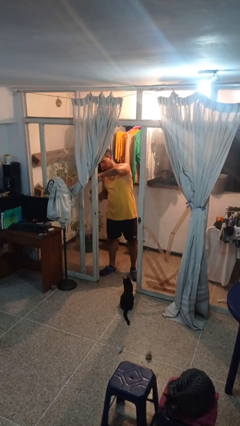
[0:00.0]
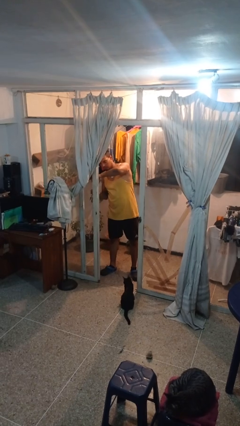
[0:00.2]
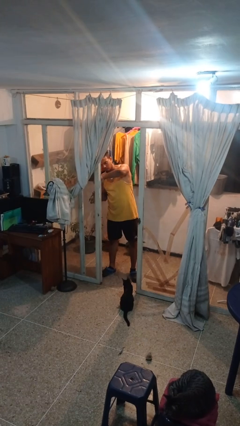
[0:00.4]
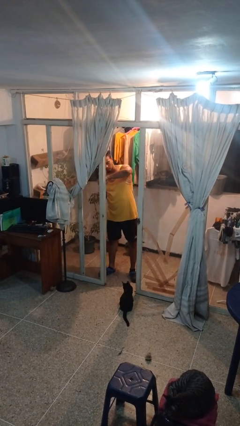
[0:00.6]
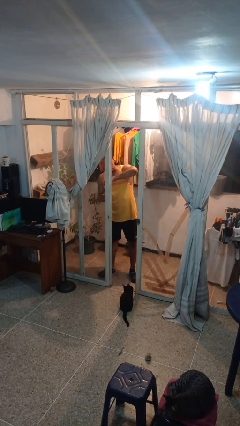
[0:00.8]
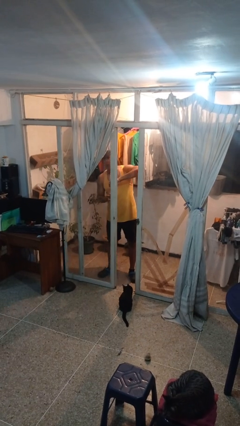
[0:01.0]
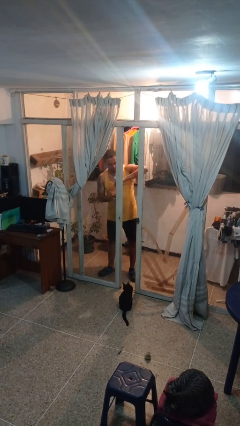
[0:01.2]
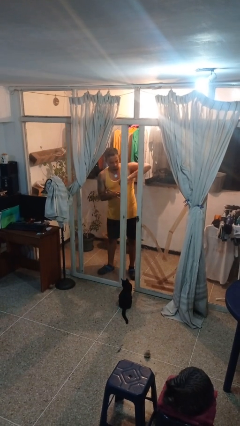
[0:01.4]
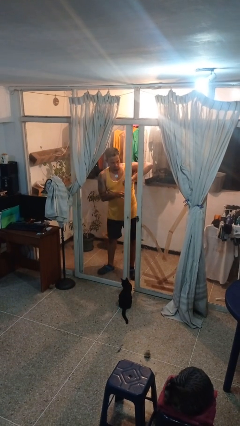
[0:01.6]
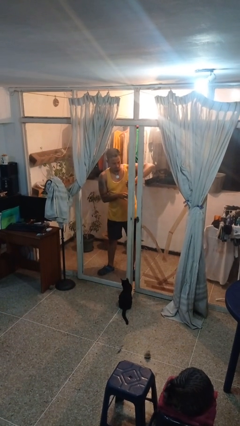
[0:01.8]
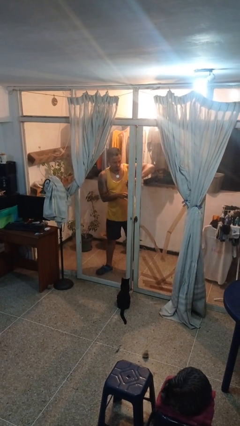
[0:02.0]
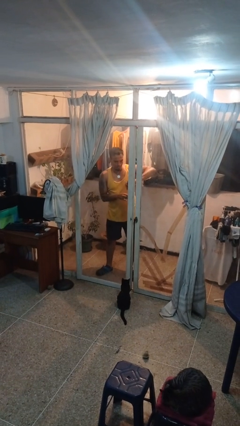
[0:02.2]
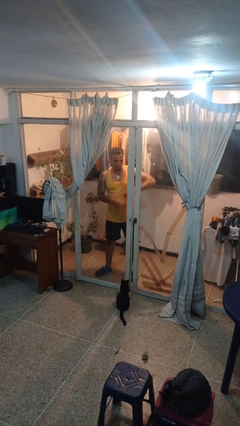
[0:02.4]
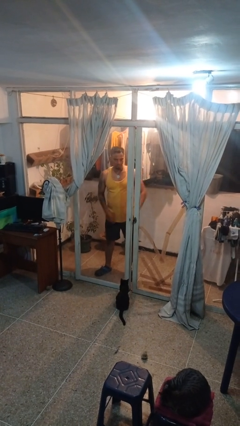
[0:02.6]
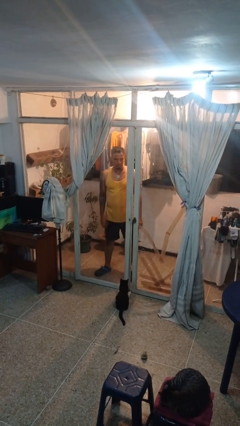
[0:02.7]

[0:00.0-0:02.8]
person closes sliding door

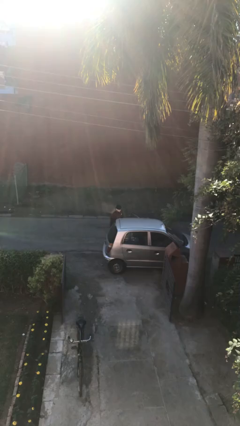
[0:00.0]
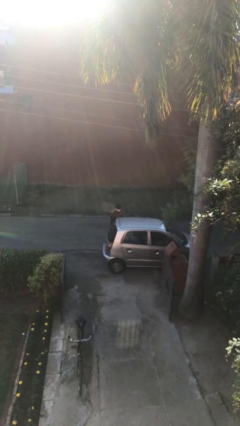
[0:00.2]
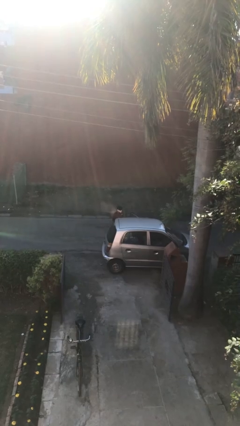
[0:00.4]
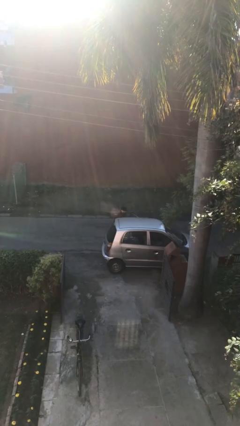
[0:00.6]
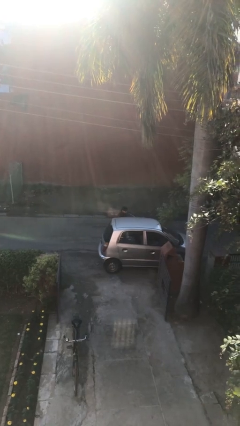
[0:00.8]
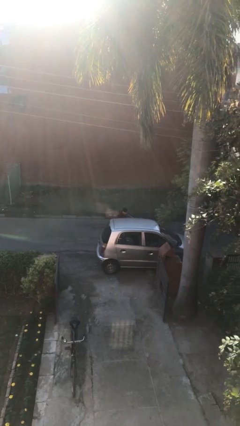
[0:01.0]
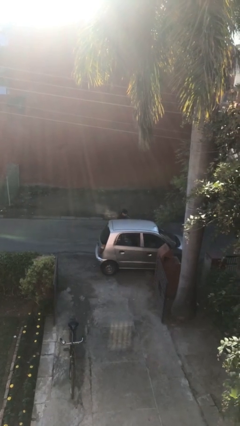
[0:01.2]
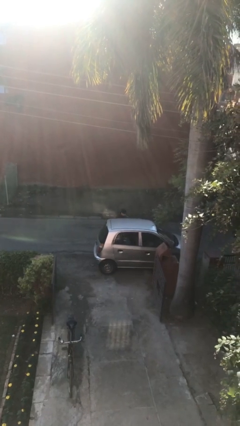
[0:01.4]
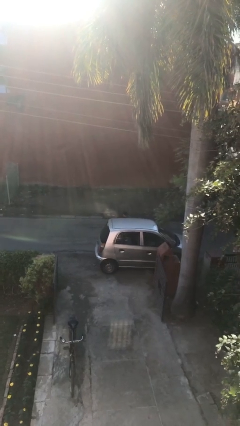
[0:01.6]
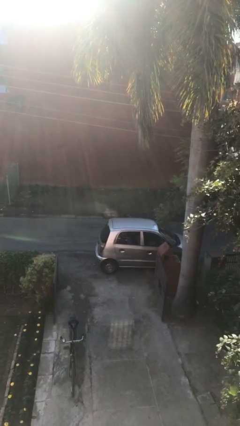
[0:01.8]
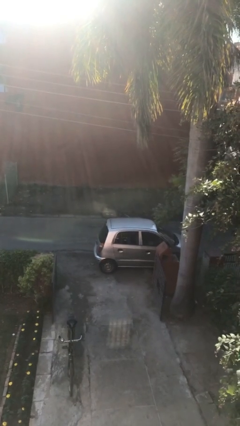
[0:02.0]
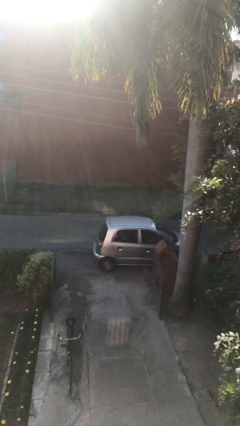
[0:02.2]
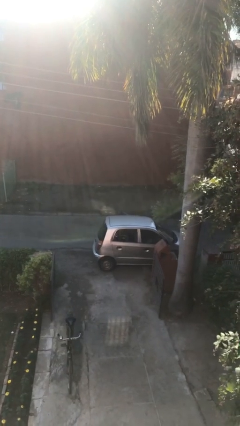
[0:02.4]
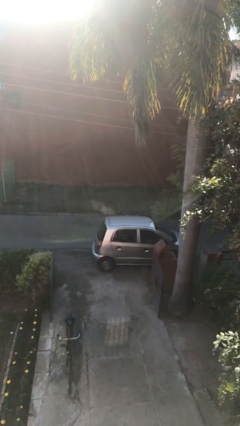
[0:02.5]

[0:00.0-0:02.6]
person enters car

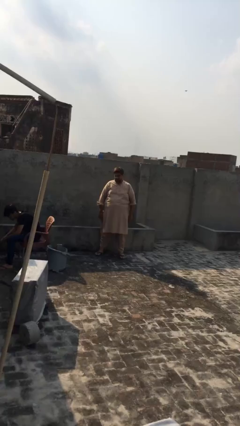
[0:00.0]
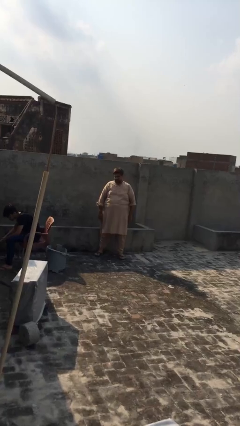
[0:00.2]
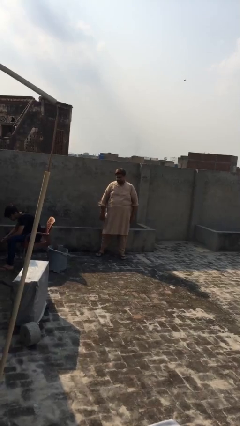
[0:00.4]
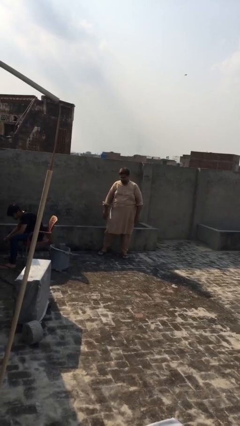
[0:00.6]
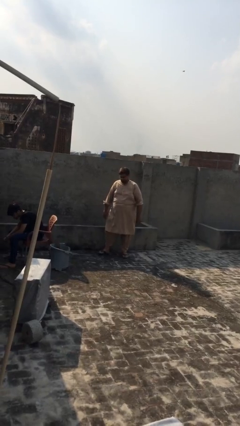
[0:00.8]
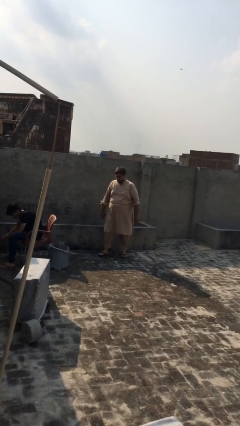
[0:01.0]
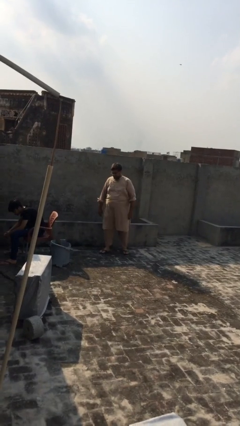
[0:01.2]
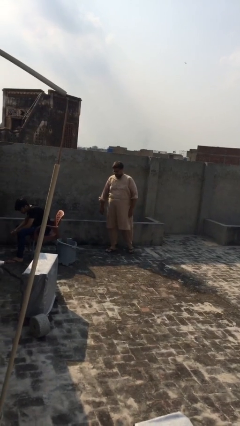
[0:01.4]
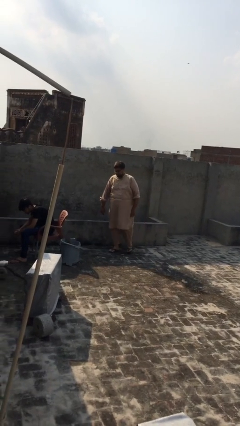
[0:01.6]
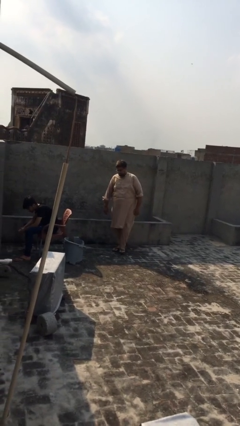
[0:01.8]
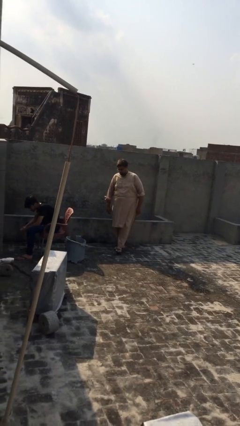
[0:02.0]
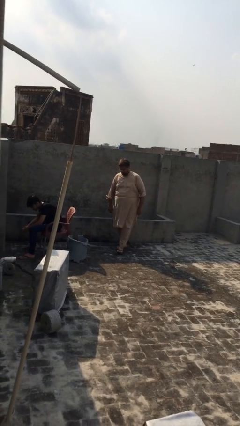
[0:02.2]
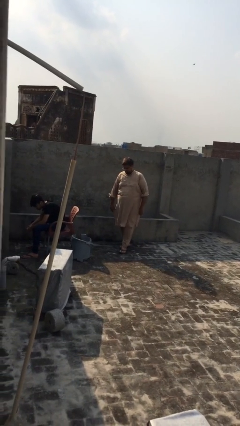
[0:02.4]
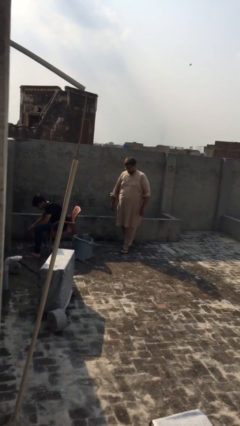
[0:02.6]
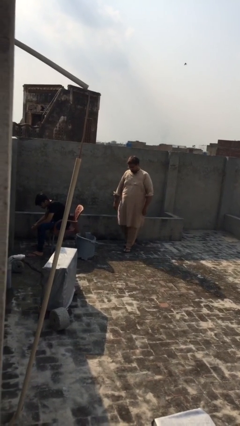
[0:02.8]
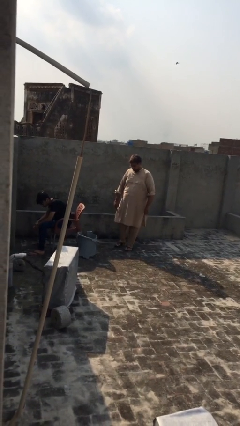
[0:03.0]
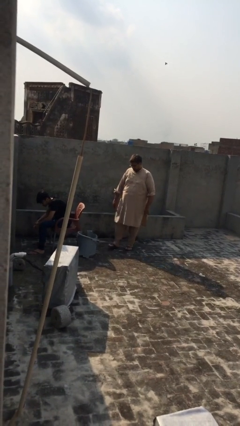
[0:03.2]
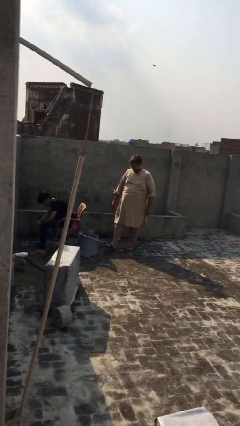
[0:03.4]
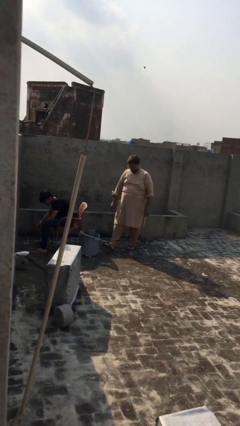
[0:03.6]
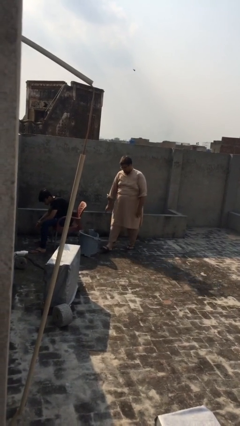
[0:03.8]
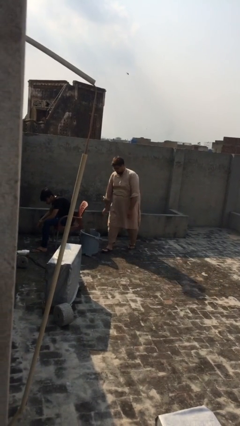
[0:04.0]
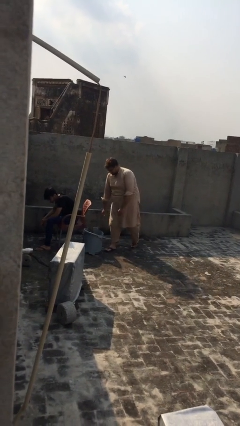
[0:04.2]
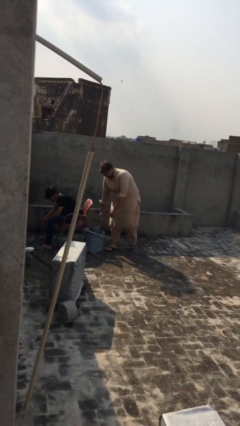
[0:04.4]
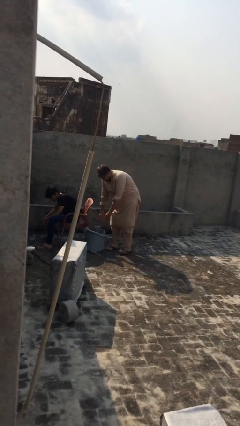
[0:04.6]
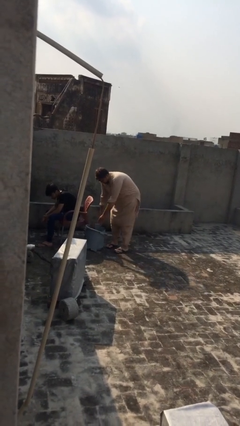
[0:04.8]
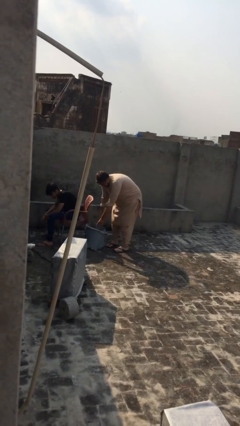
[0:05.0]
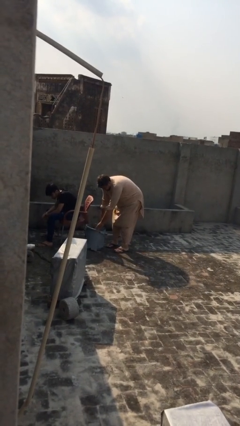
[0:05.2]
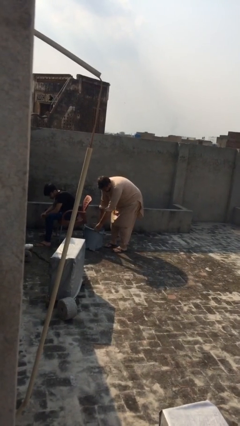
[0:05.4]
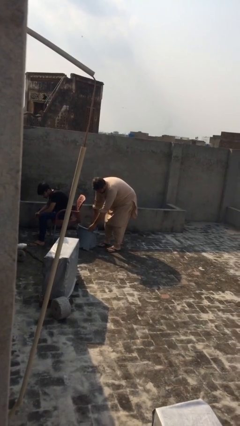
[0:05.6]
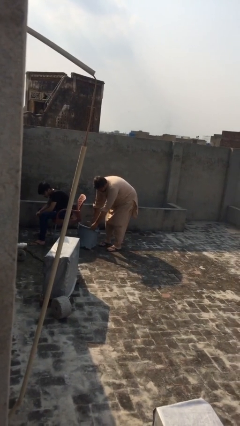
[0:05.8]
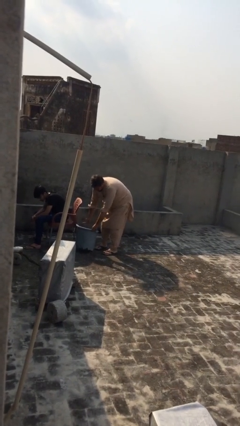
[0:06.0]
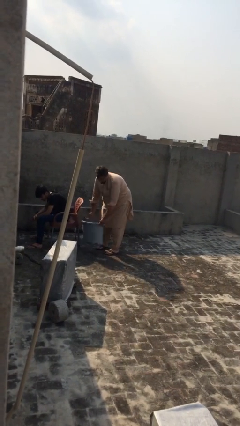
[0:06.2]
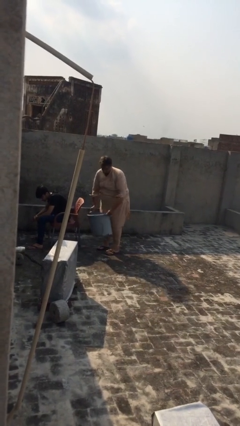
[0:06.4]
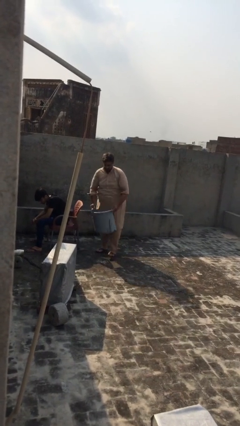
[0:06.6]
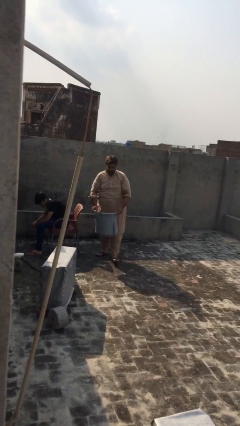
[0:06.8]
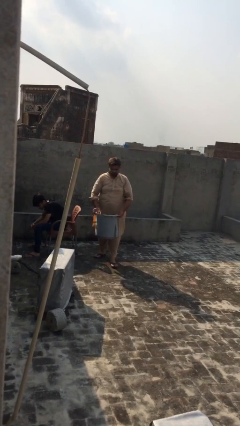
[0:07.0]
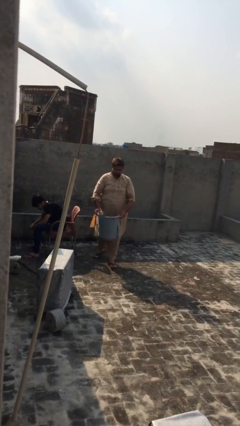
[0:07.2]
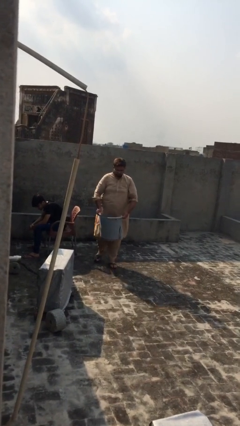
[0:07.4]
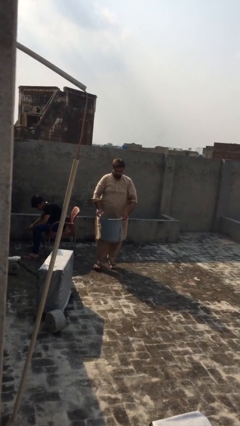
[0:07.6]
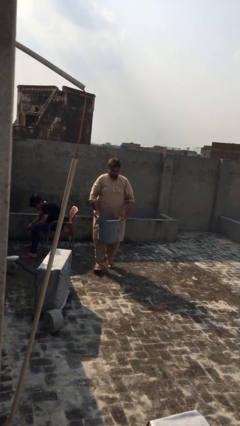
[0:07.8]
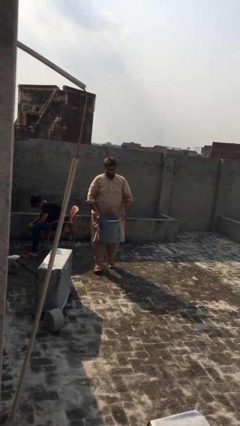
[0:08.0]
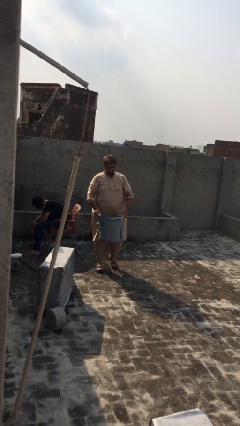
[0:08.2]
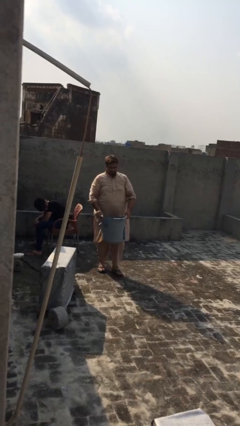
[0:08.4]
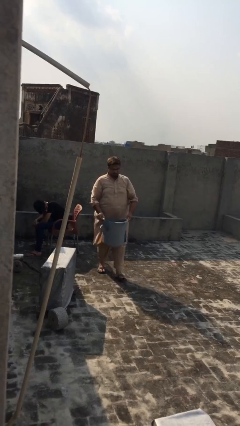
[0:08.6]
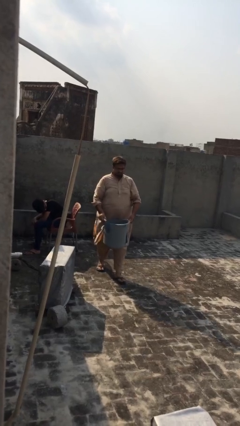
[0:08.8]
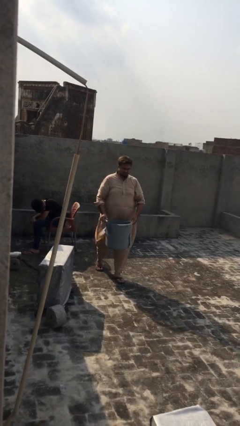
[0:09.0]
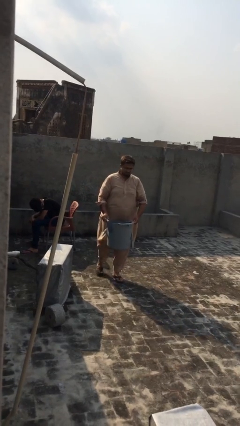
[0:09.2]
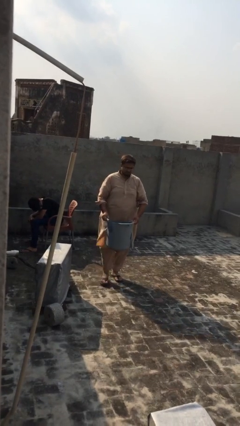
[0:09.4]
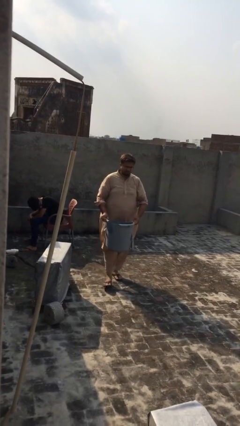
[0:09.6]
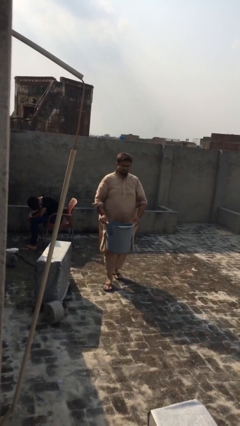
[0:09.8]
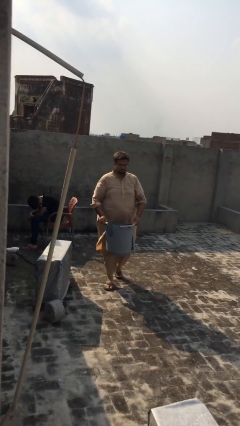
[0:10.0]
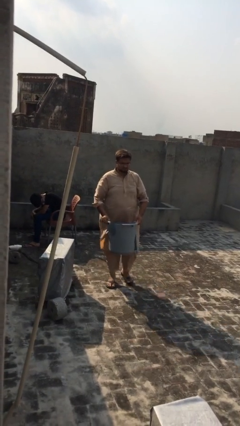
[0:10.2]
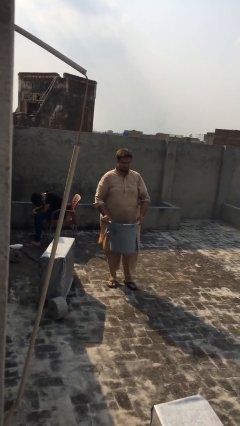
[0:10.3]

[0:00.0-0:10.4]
person steals object from person

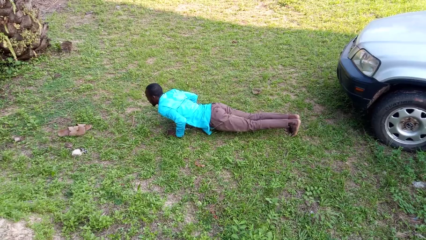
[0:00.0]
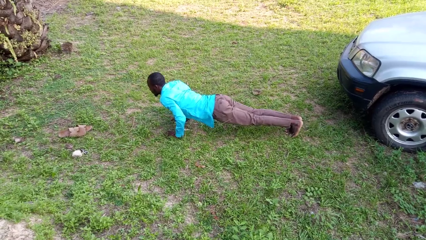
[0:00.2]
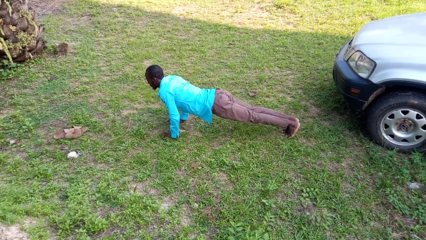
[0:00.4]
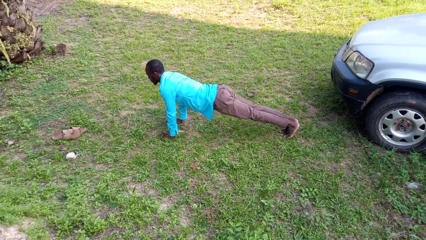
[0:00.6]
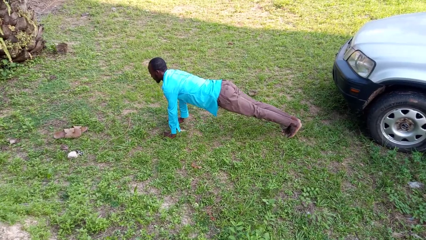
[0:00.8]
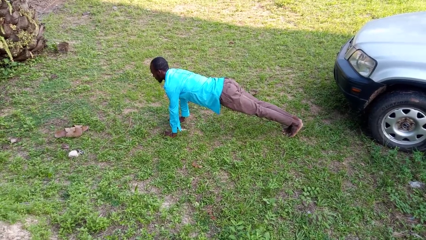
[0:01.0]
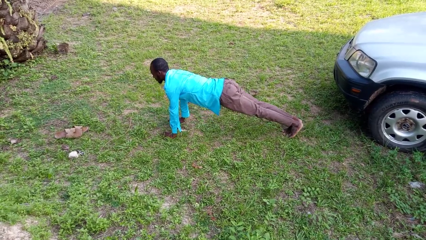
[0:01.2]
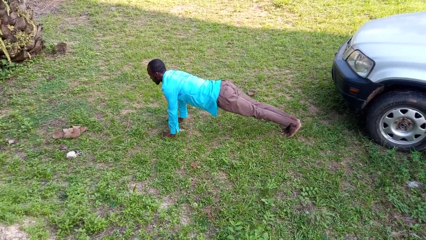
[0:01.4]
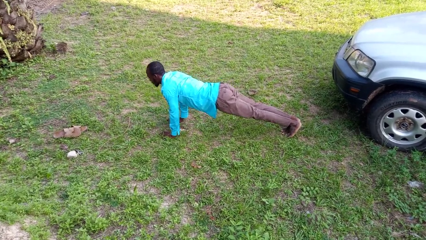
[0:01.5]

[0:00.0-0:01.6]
person exercises with pushup

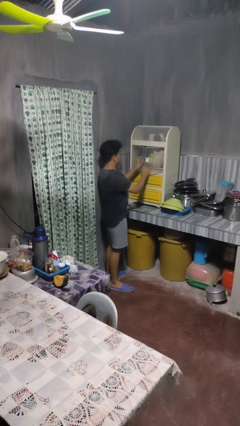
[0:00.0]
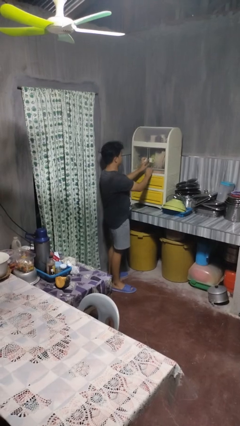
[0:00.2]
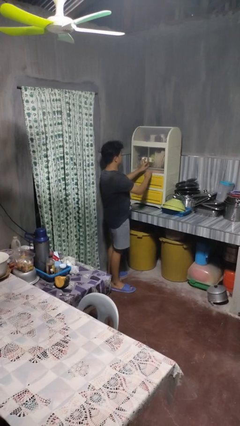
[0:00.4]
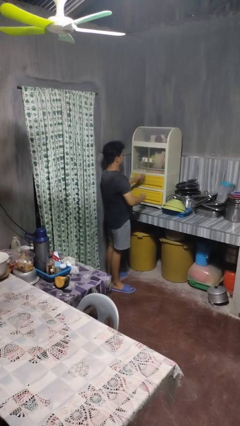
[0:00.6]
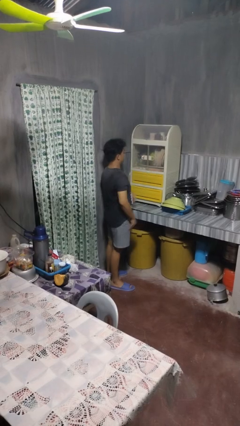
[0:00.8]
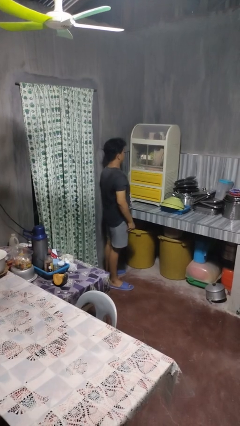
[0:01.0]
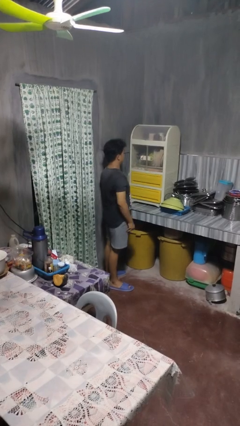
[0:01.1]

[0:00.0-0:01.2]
person closes cabinet
